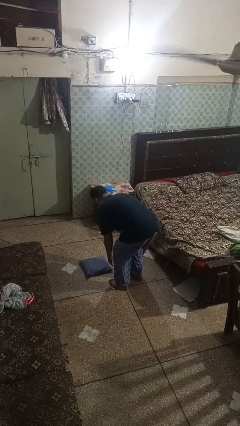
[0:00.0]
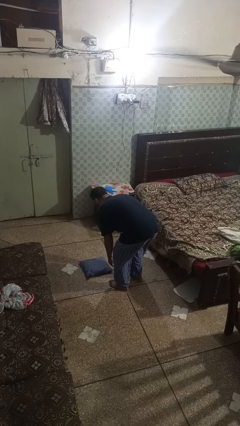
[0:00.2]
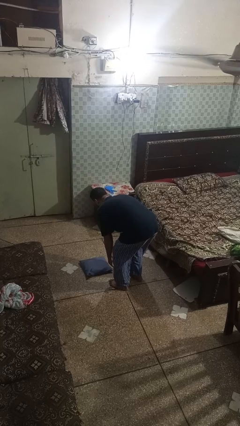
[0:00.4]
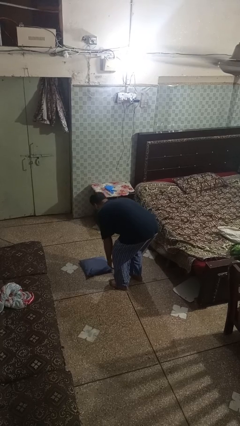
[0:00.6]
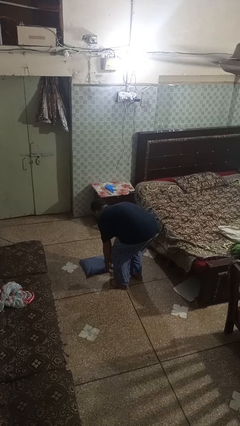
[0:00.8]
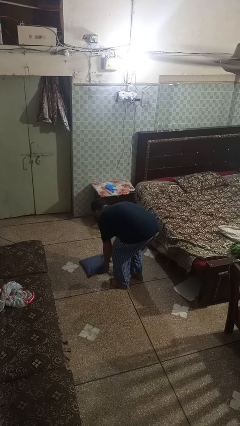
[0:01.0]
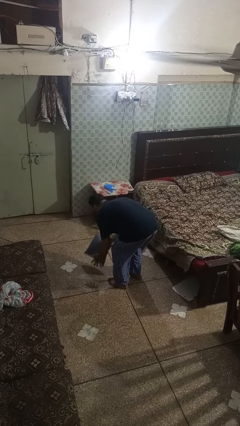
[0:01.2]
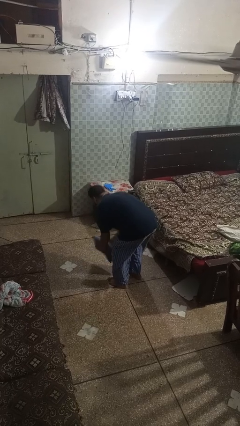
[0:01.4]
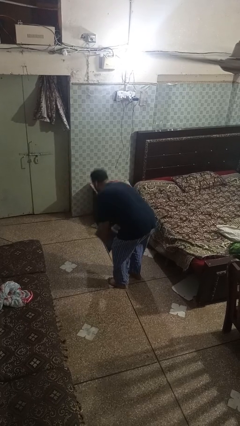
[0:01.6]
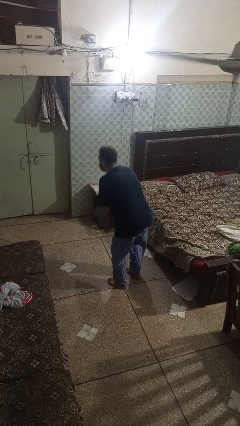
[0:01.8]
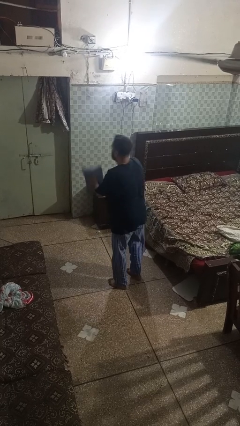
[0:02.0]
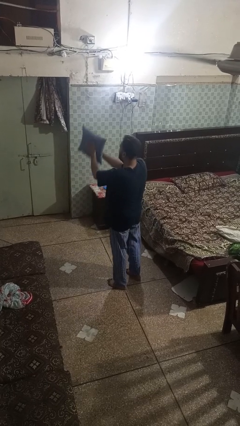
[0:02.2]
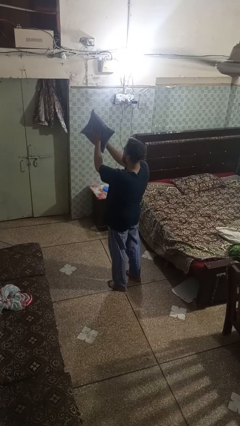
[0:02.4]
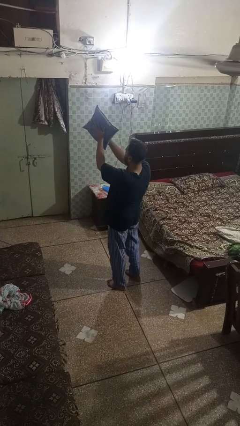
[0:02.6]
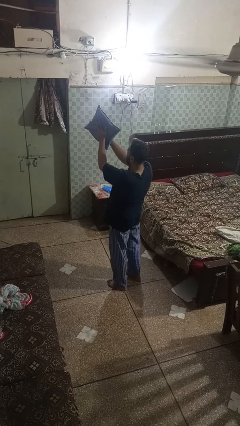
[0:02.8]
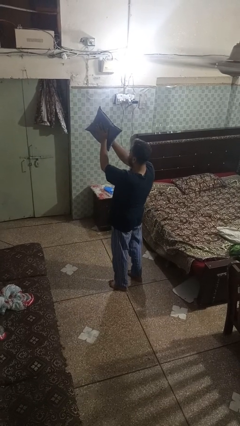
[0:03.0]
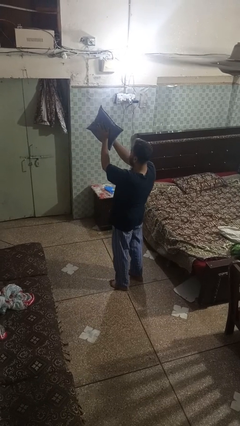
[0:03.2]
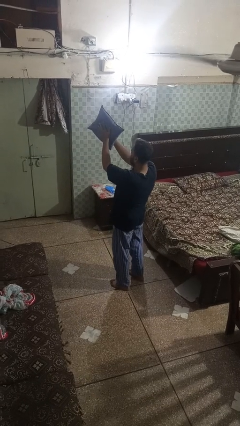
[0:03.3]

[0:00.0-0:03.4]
person picks up object from floor

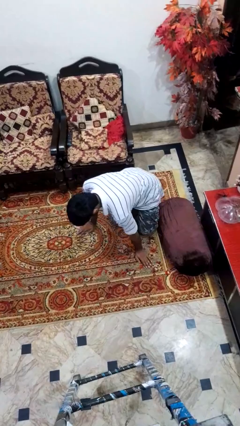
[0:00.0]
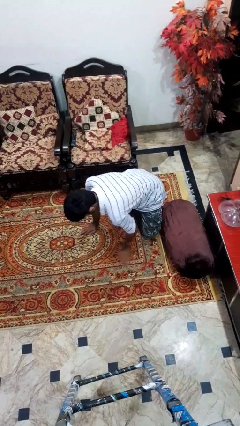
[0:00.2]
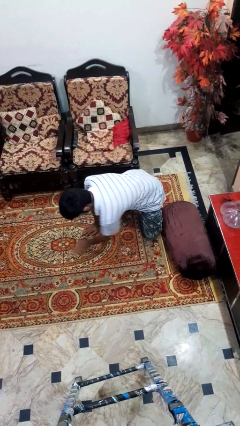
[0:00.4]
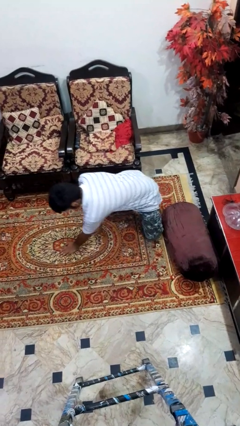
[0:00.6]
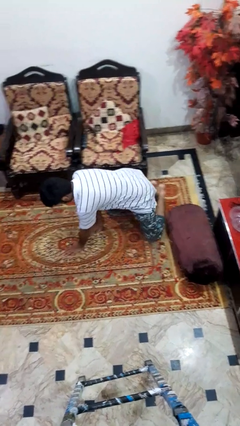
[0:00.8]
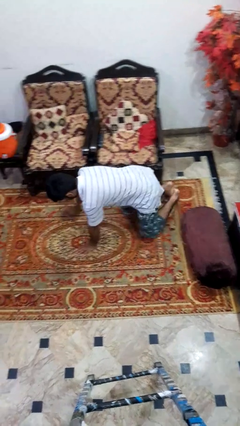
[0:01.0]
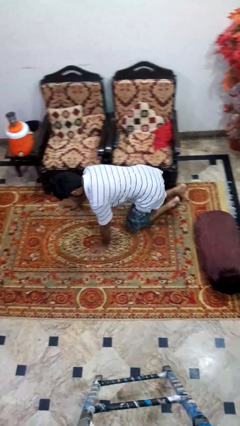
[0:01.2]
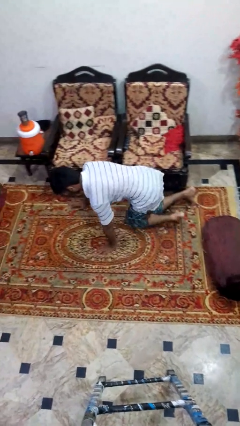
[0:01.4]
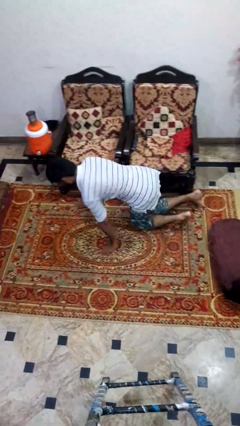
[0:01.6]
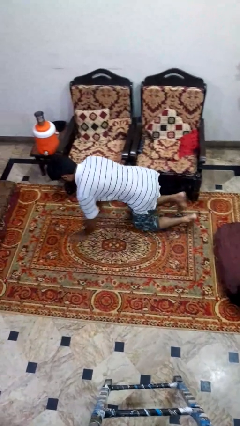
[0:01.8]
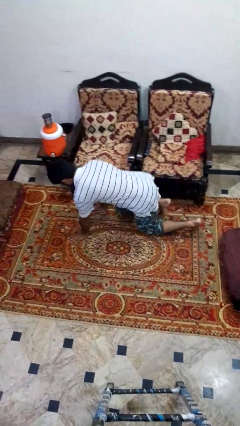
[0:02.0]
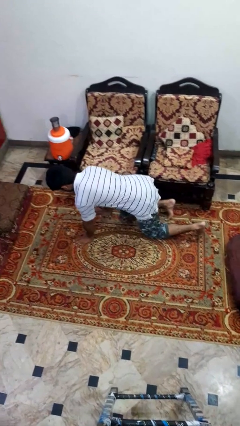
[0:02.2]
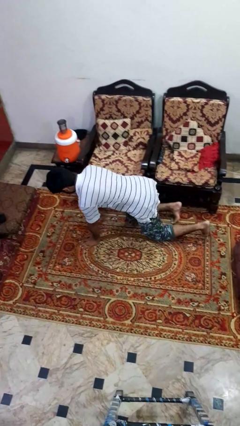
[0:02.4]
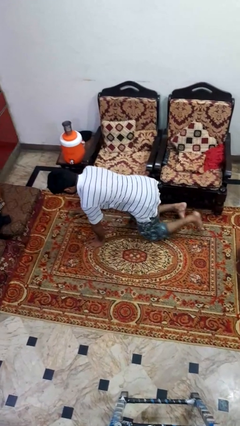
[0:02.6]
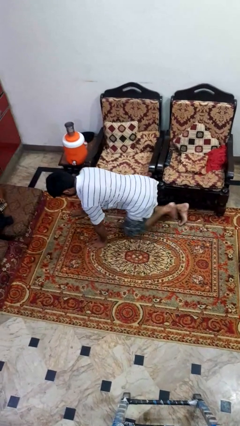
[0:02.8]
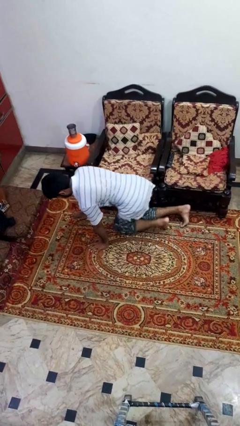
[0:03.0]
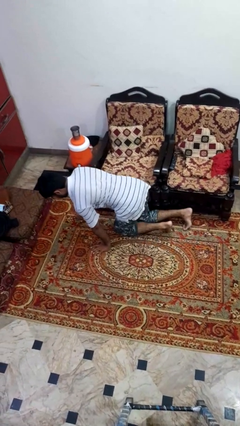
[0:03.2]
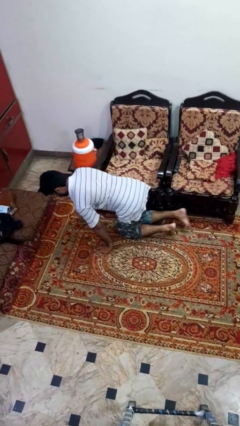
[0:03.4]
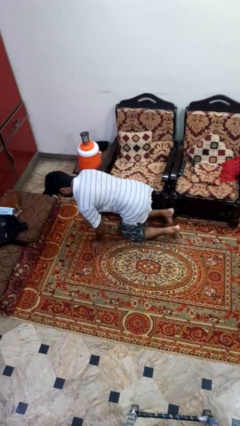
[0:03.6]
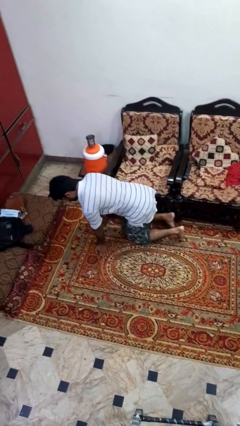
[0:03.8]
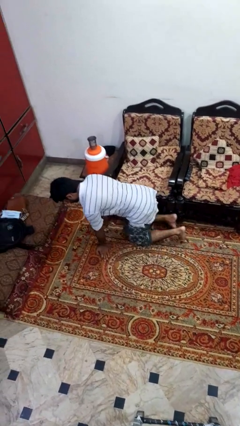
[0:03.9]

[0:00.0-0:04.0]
person crawls

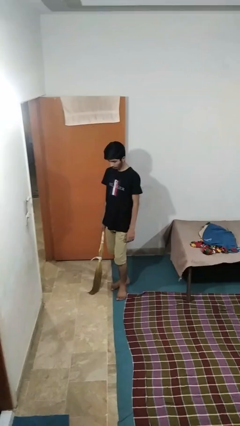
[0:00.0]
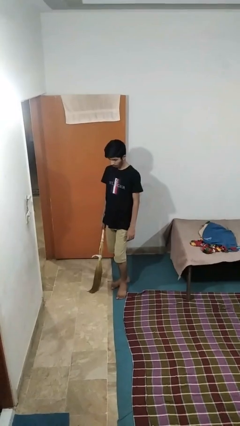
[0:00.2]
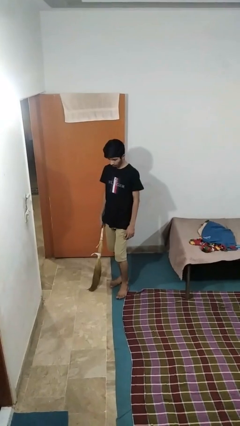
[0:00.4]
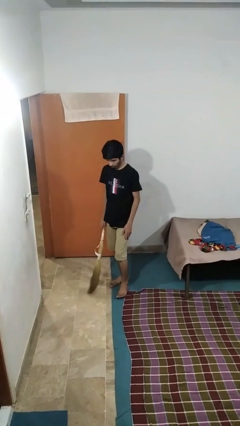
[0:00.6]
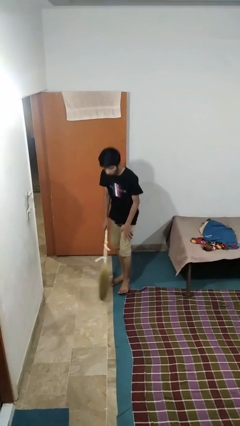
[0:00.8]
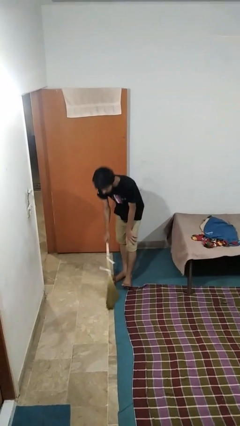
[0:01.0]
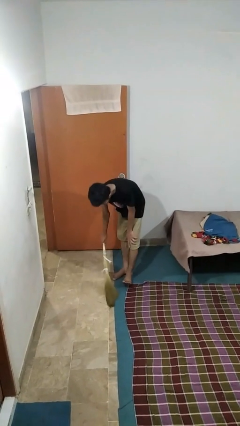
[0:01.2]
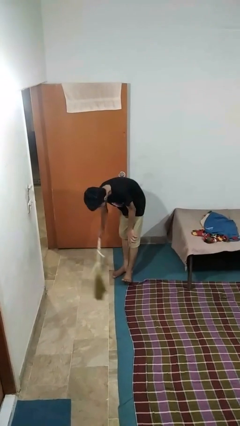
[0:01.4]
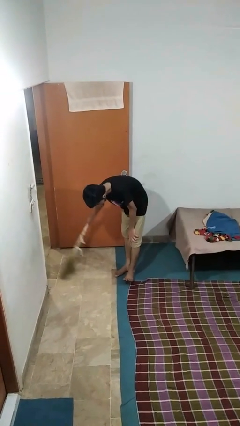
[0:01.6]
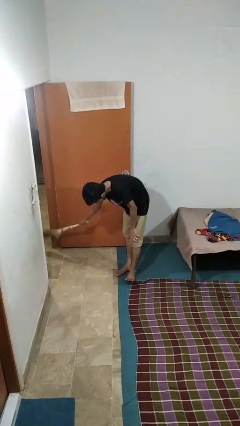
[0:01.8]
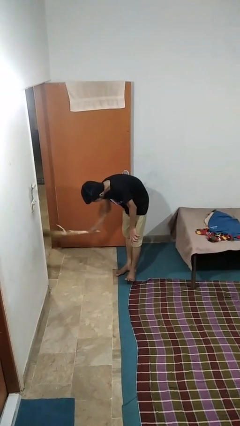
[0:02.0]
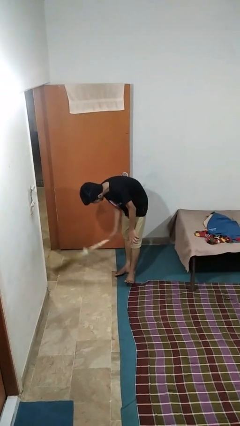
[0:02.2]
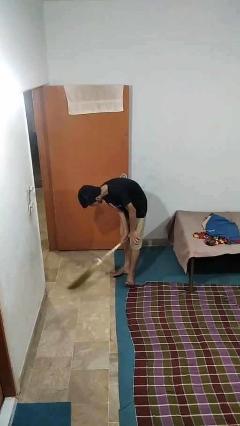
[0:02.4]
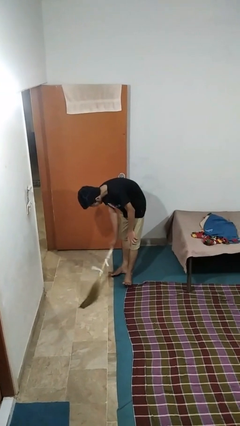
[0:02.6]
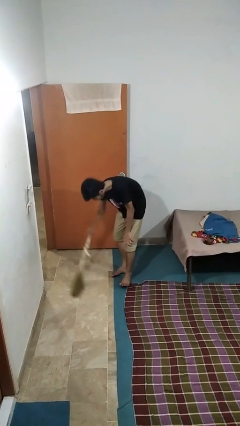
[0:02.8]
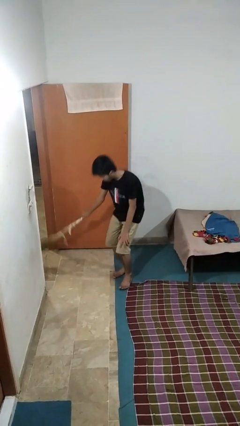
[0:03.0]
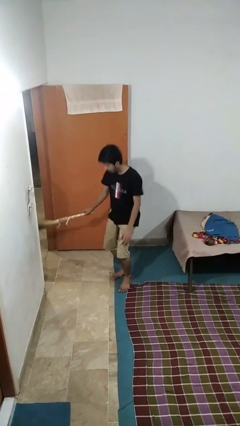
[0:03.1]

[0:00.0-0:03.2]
person sweeps floor

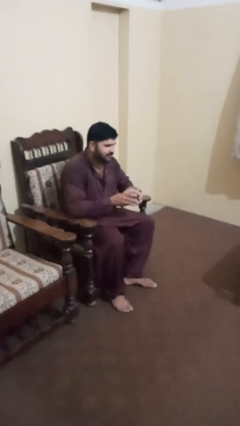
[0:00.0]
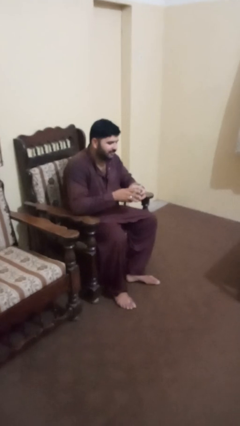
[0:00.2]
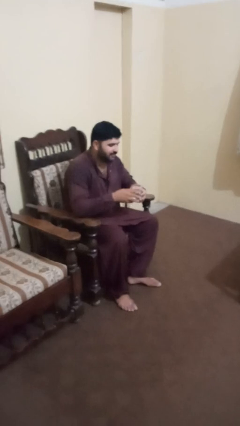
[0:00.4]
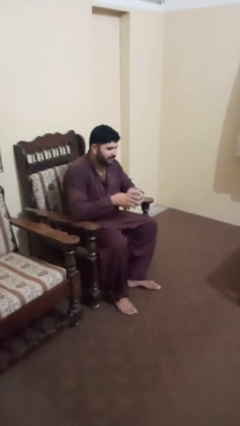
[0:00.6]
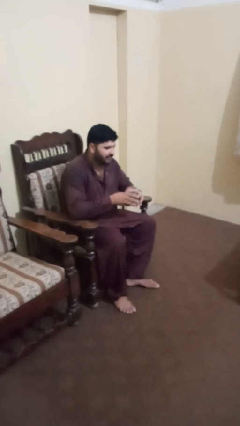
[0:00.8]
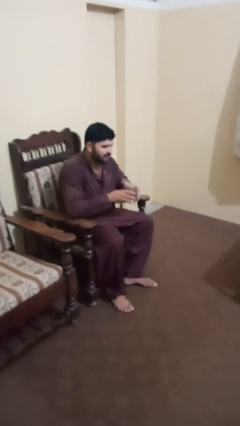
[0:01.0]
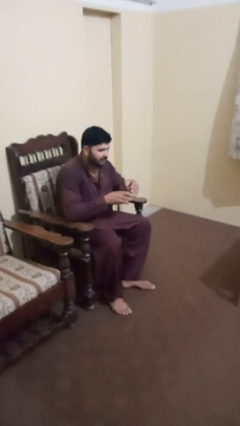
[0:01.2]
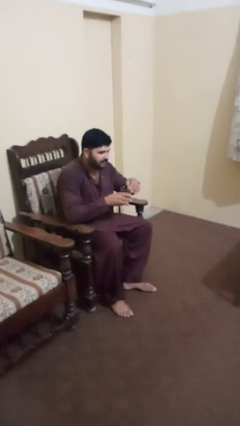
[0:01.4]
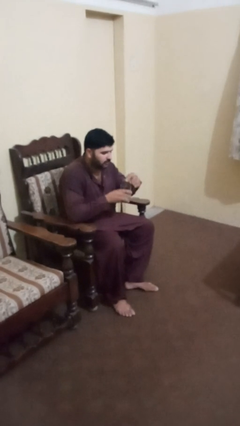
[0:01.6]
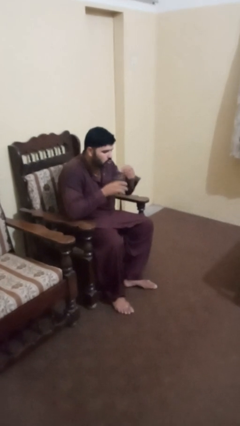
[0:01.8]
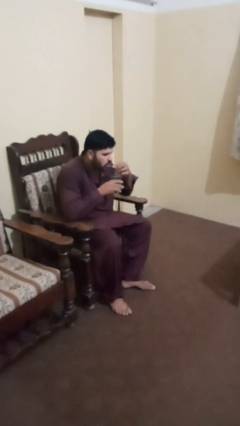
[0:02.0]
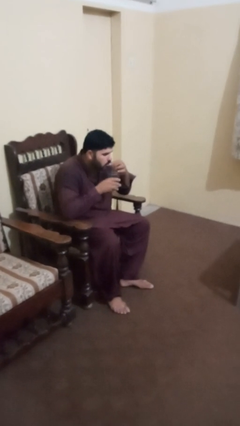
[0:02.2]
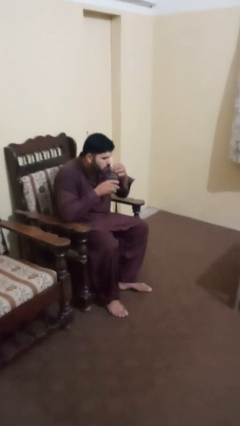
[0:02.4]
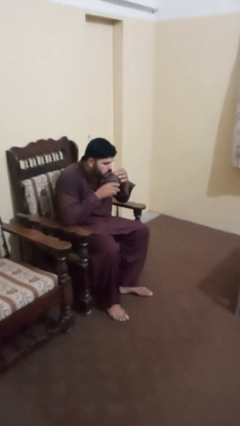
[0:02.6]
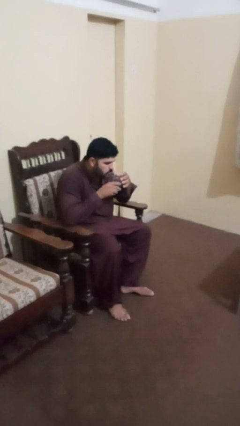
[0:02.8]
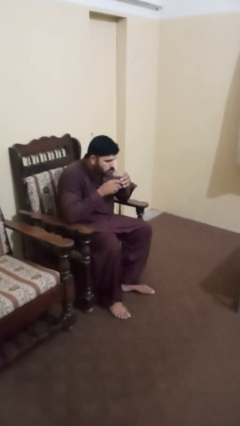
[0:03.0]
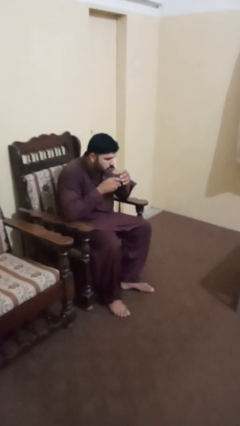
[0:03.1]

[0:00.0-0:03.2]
person drinks from straw

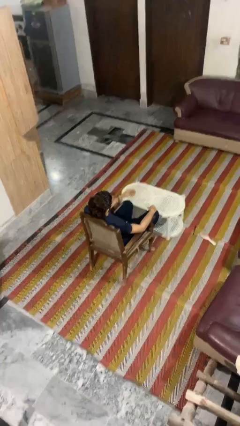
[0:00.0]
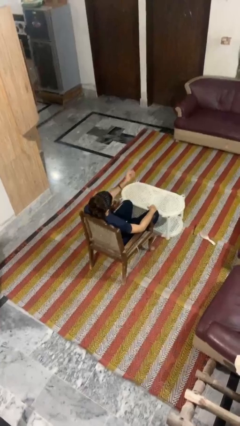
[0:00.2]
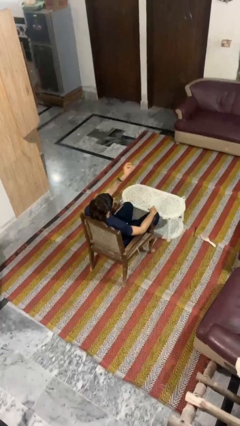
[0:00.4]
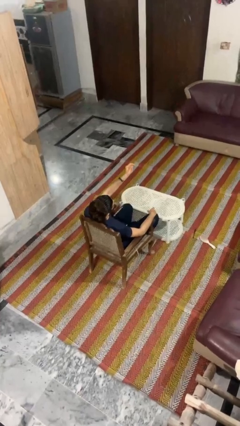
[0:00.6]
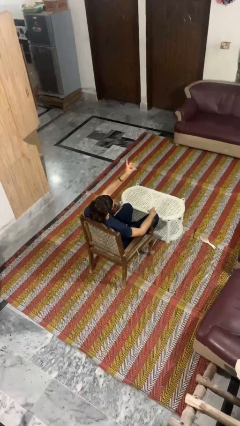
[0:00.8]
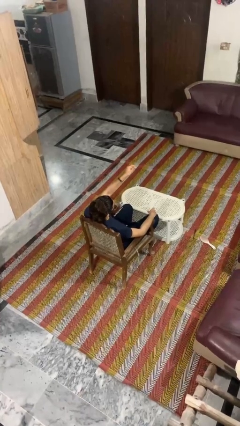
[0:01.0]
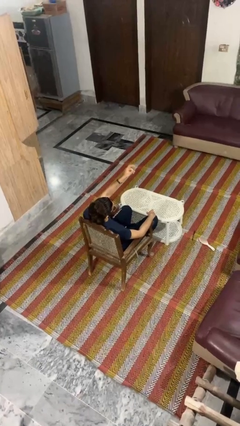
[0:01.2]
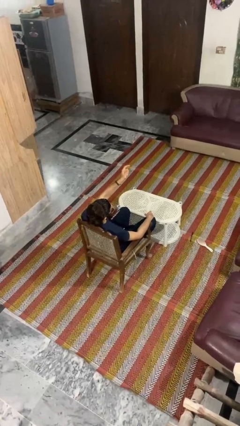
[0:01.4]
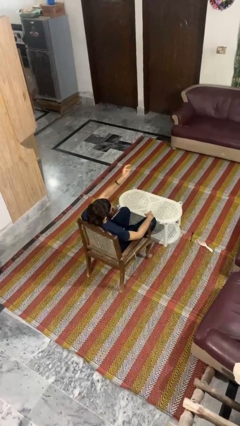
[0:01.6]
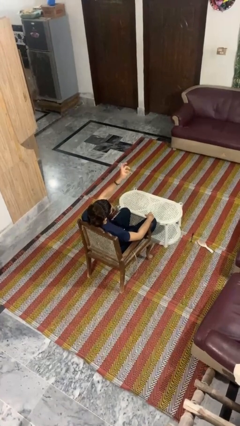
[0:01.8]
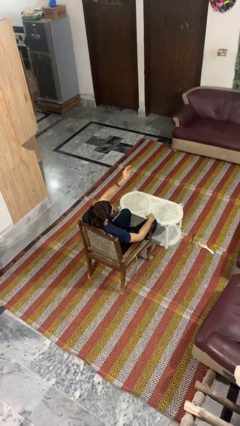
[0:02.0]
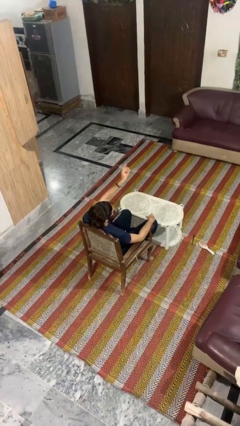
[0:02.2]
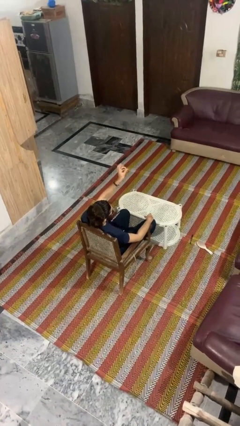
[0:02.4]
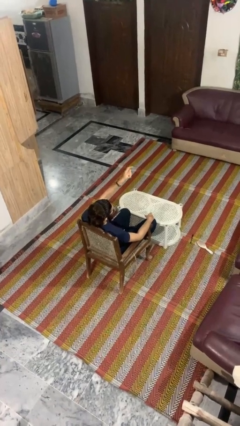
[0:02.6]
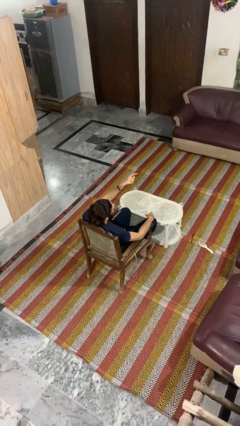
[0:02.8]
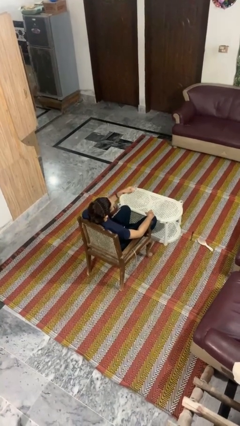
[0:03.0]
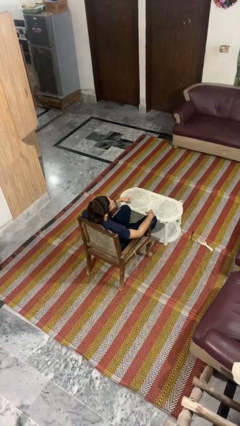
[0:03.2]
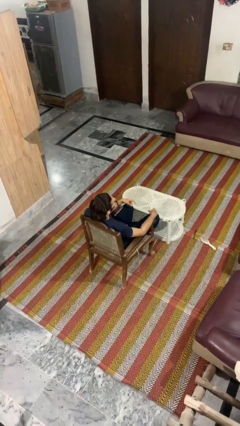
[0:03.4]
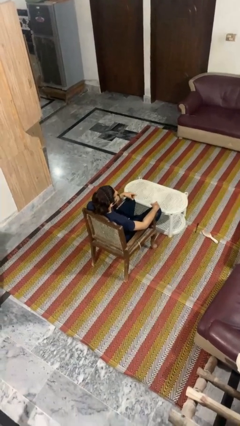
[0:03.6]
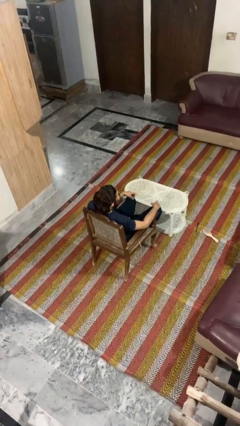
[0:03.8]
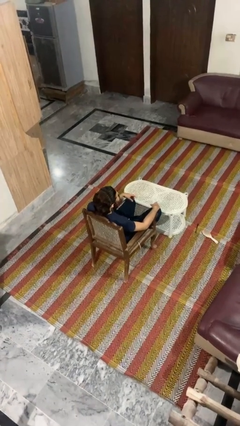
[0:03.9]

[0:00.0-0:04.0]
person snaps fingers
